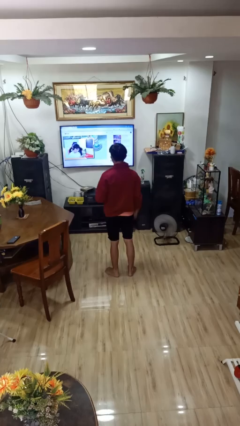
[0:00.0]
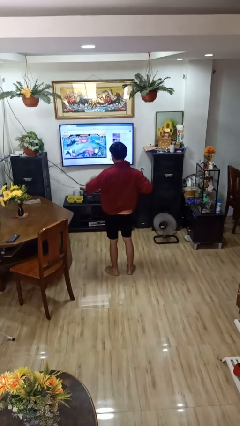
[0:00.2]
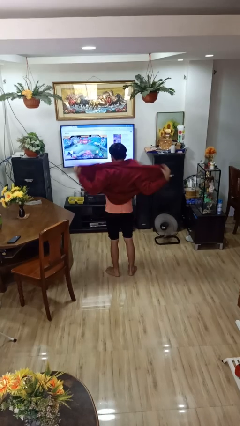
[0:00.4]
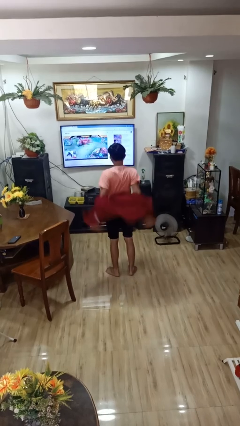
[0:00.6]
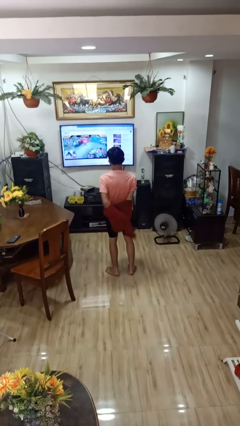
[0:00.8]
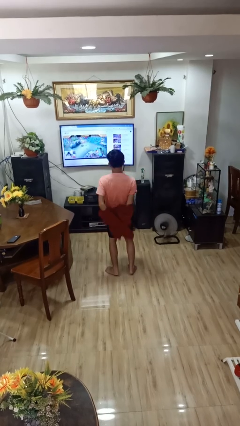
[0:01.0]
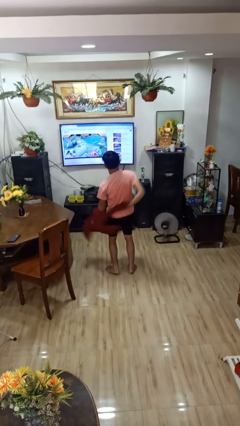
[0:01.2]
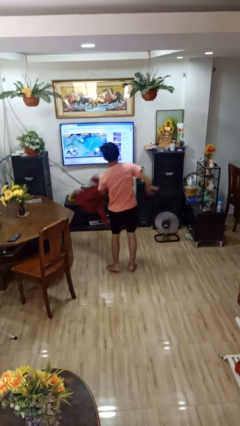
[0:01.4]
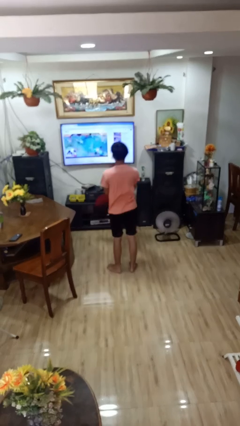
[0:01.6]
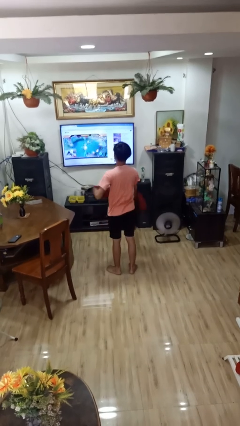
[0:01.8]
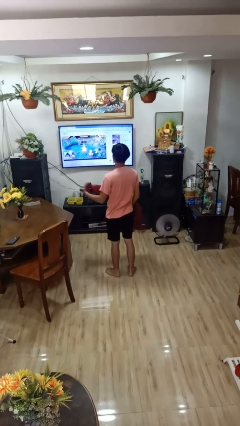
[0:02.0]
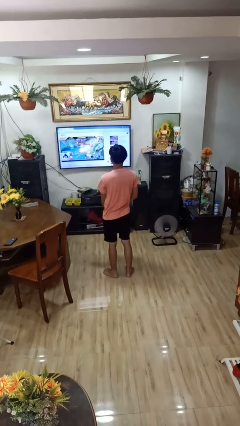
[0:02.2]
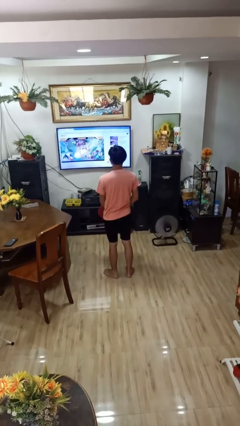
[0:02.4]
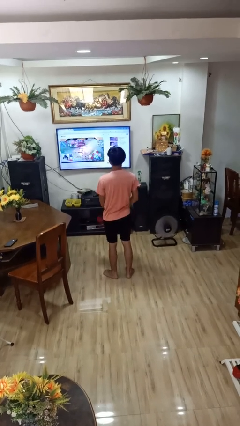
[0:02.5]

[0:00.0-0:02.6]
person takes off jacket

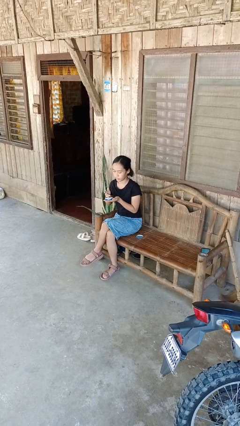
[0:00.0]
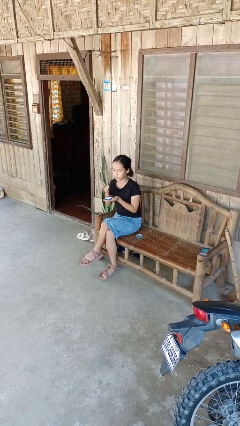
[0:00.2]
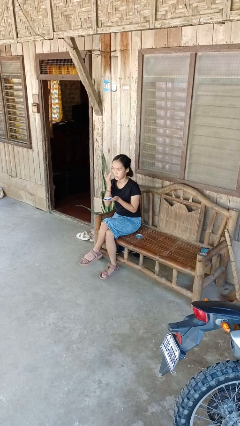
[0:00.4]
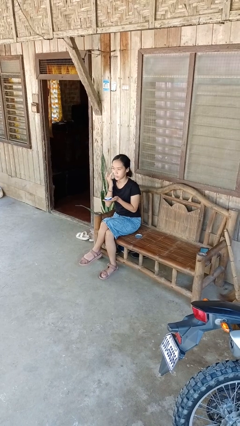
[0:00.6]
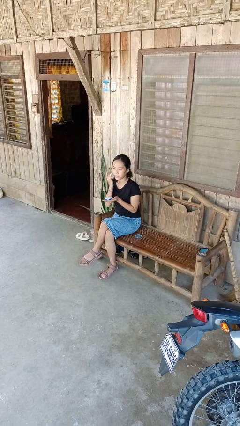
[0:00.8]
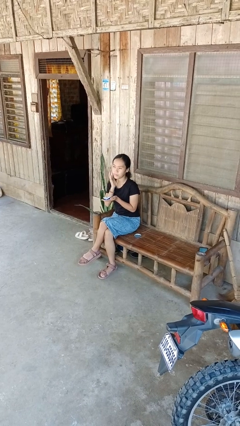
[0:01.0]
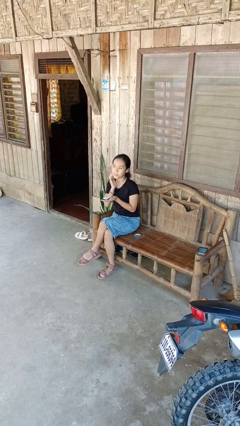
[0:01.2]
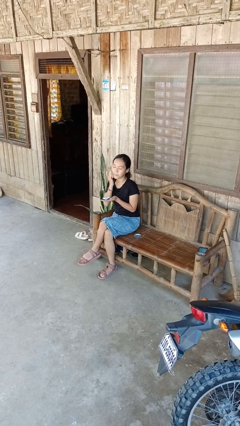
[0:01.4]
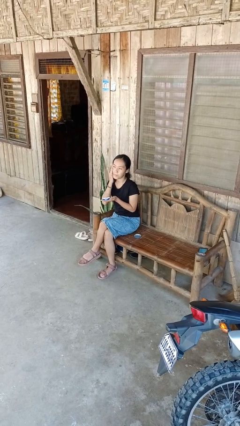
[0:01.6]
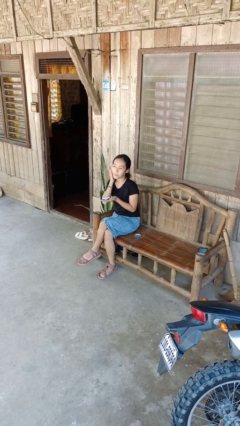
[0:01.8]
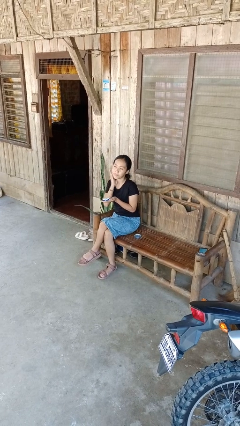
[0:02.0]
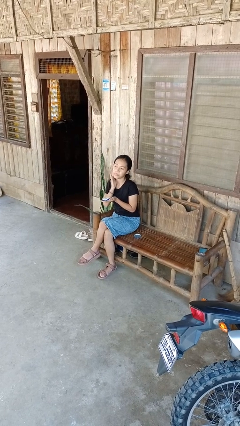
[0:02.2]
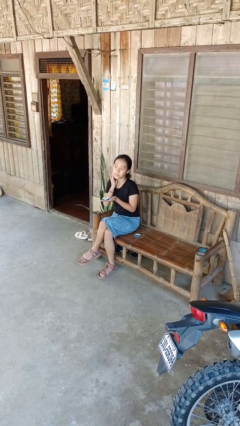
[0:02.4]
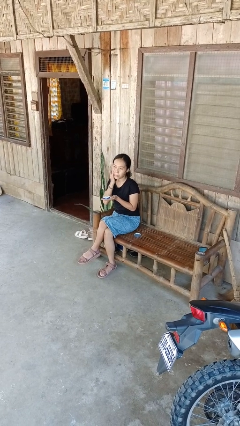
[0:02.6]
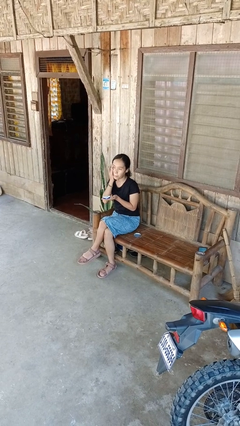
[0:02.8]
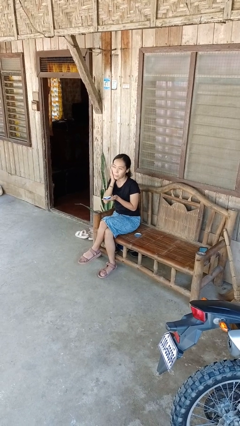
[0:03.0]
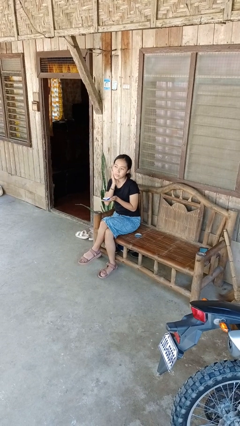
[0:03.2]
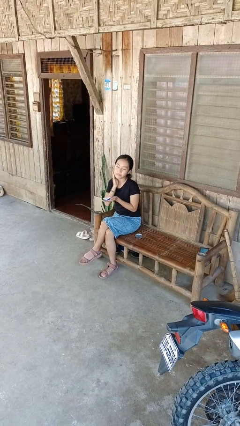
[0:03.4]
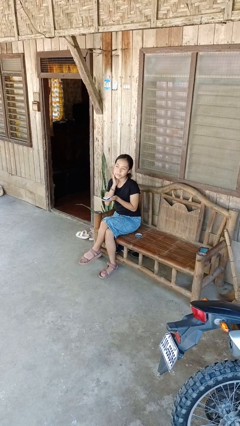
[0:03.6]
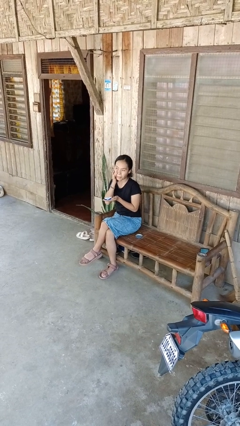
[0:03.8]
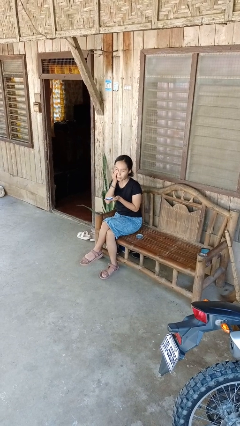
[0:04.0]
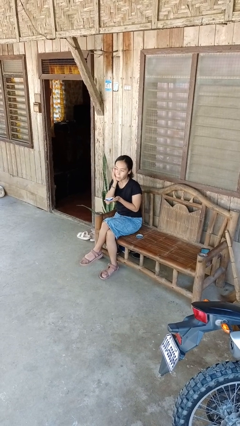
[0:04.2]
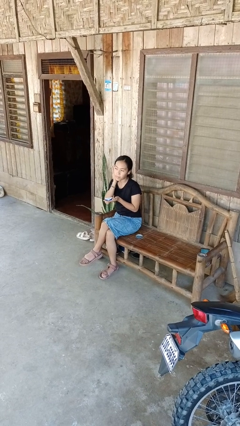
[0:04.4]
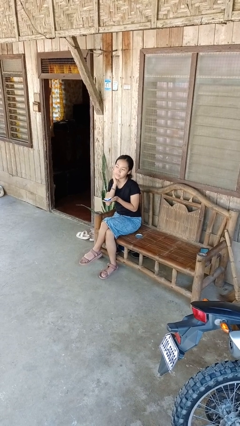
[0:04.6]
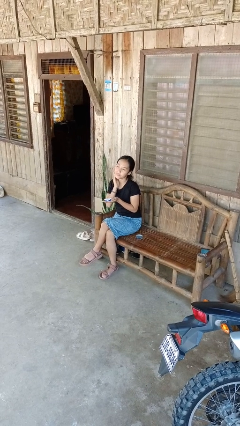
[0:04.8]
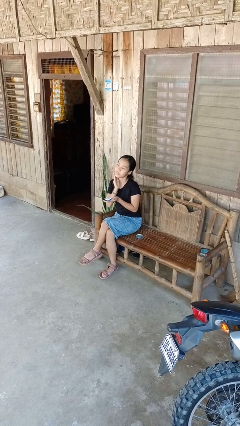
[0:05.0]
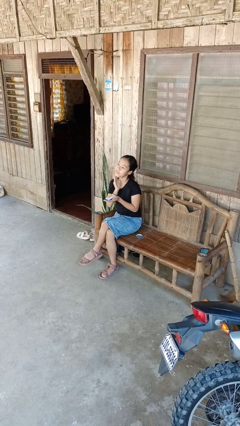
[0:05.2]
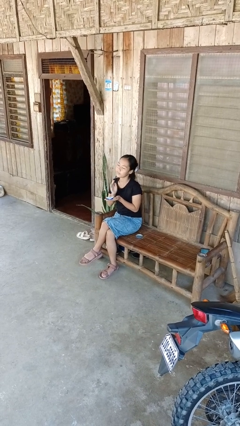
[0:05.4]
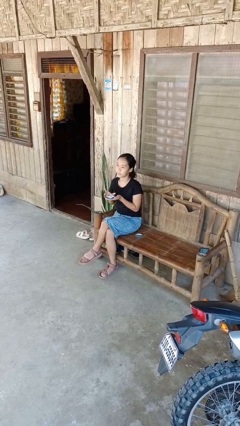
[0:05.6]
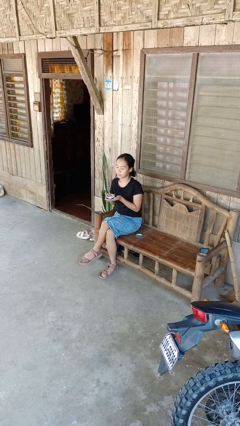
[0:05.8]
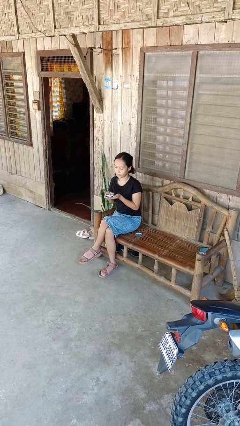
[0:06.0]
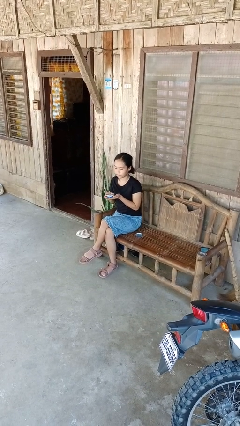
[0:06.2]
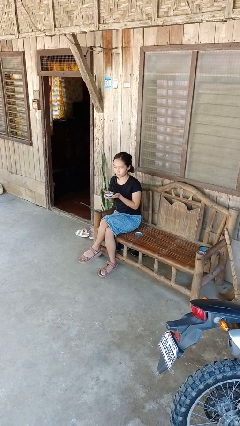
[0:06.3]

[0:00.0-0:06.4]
person applies facial moisturizer

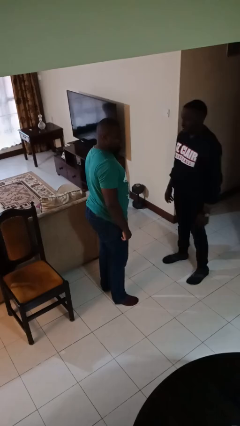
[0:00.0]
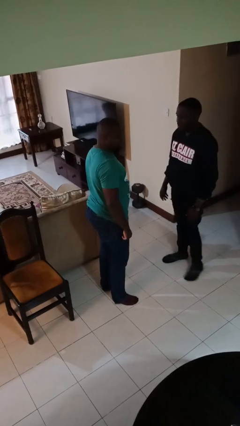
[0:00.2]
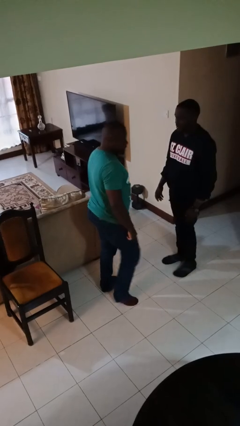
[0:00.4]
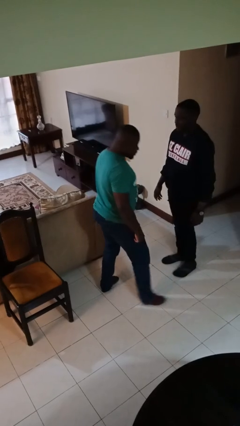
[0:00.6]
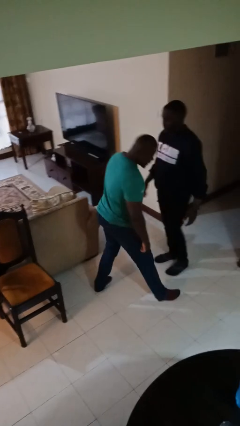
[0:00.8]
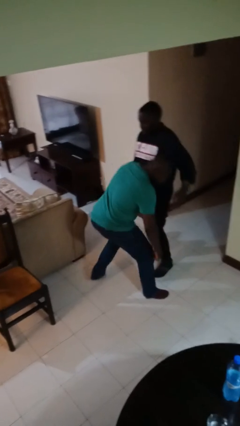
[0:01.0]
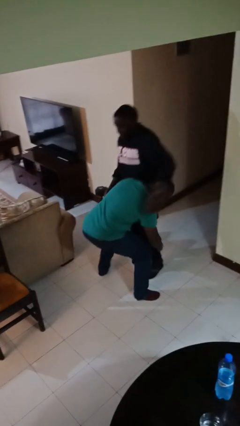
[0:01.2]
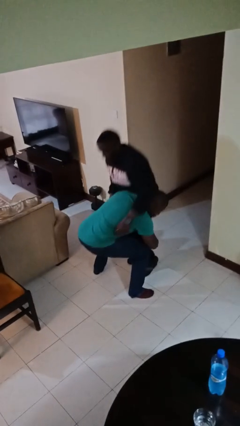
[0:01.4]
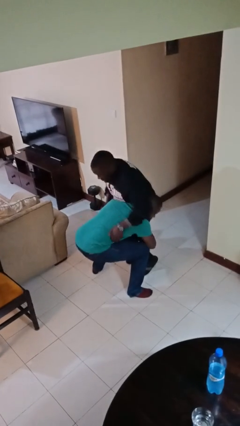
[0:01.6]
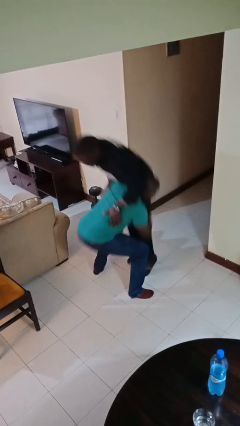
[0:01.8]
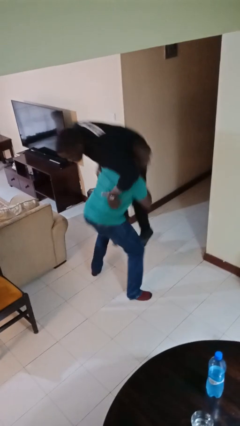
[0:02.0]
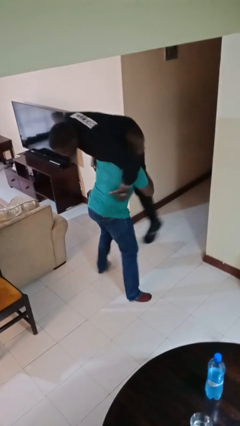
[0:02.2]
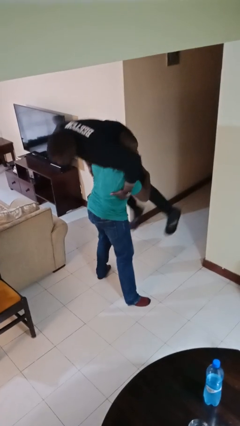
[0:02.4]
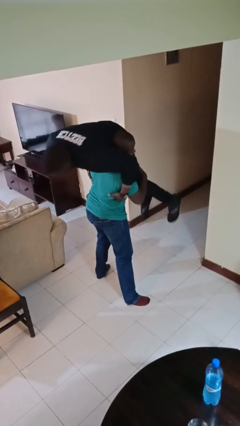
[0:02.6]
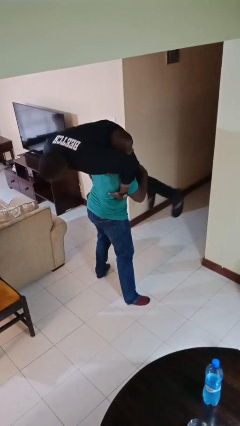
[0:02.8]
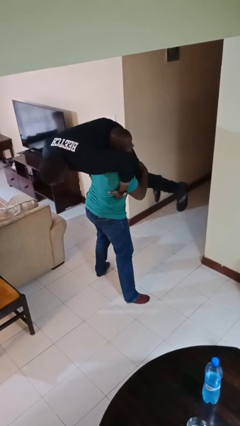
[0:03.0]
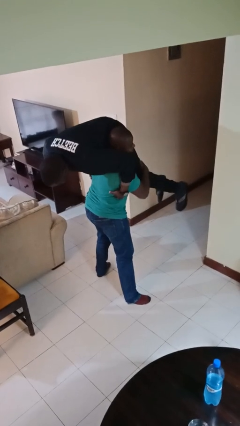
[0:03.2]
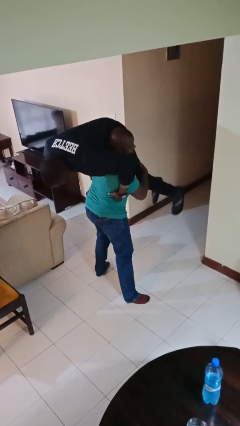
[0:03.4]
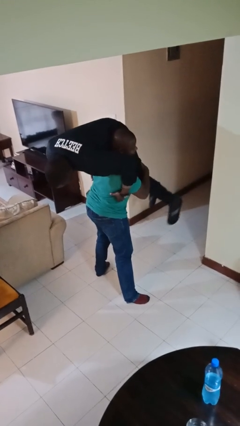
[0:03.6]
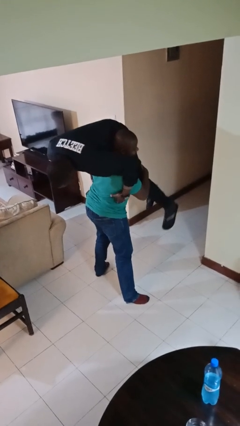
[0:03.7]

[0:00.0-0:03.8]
person carries person over shoulder

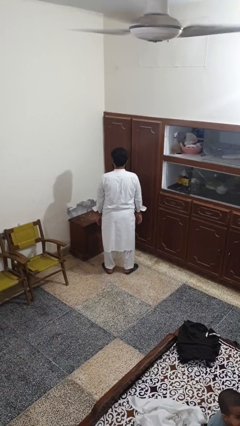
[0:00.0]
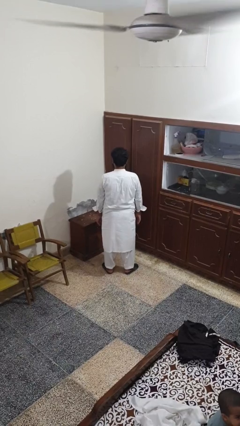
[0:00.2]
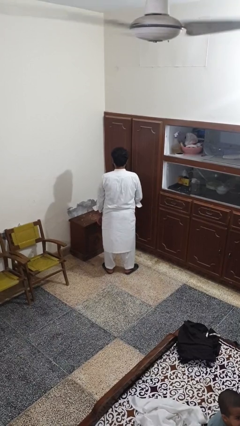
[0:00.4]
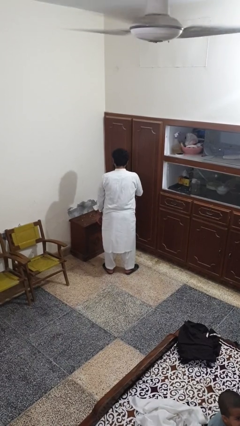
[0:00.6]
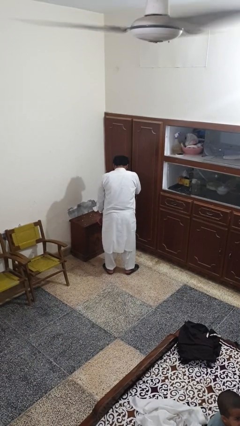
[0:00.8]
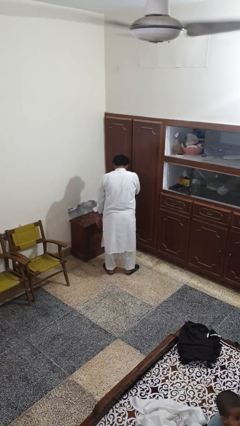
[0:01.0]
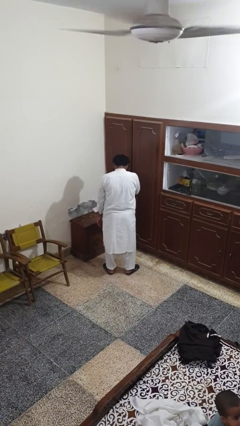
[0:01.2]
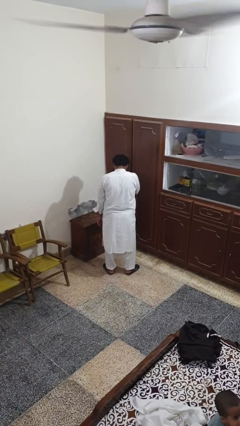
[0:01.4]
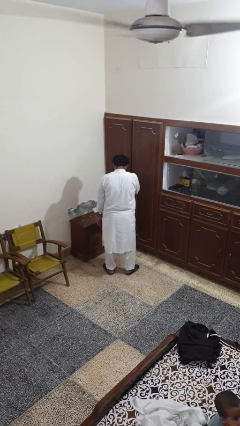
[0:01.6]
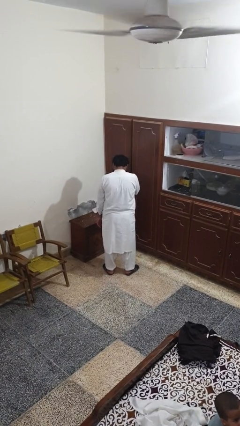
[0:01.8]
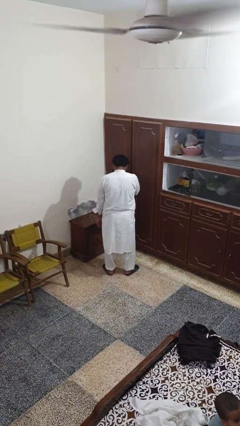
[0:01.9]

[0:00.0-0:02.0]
person sneezes into hand

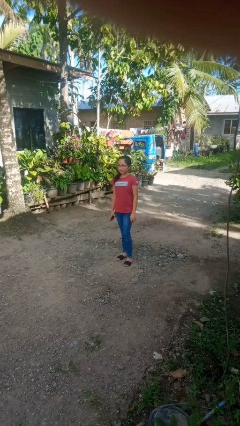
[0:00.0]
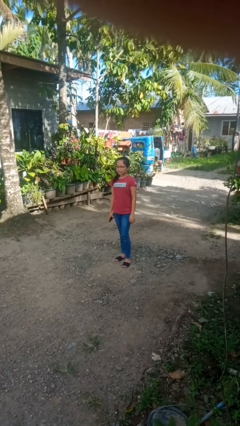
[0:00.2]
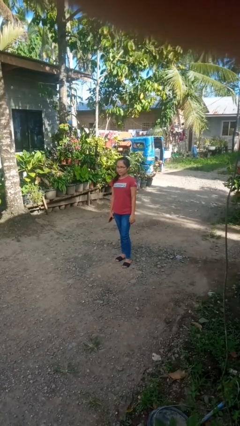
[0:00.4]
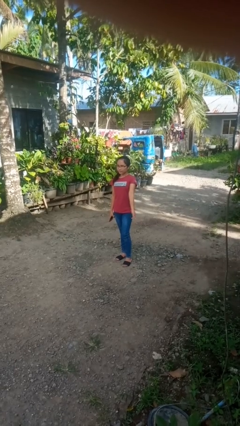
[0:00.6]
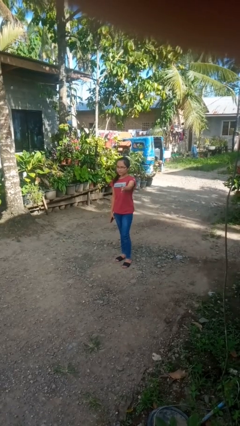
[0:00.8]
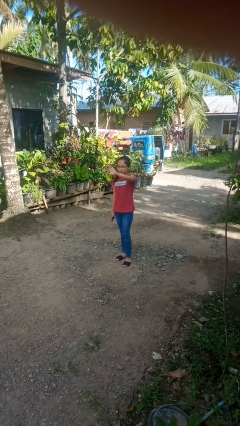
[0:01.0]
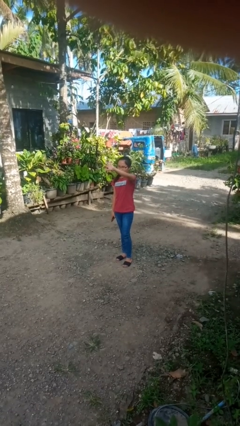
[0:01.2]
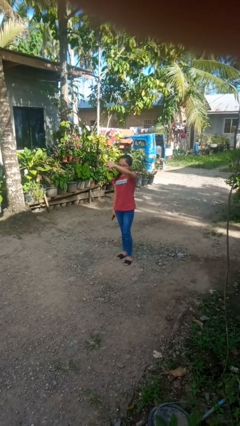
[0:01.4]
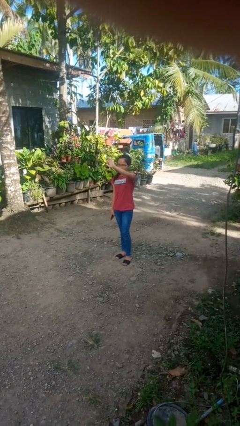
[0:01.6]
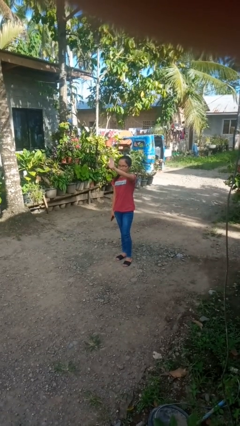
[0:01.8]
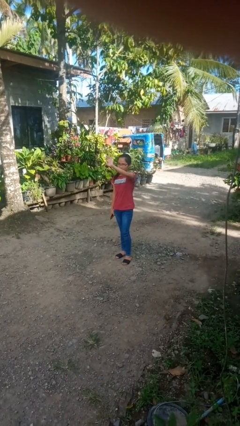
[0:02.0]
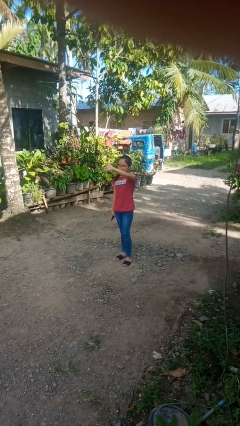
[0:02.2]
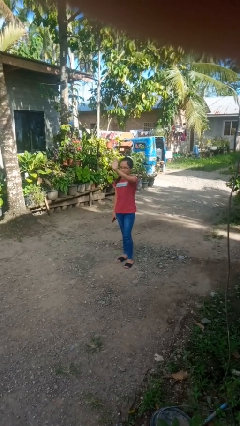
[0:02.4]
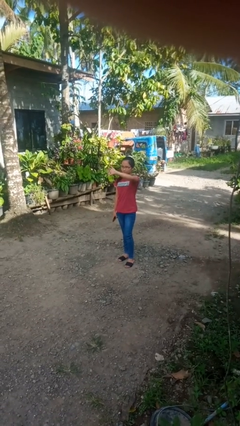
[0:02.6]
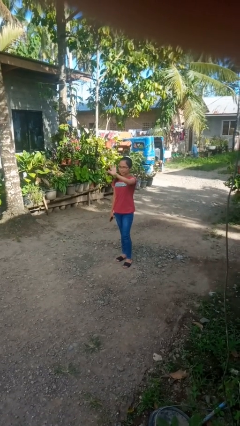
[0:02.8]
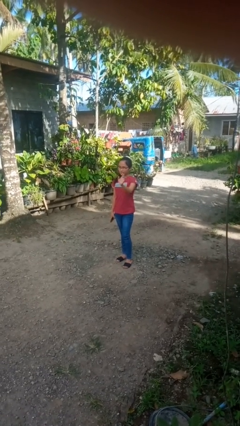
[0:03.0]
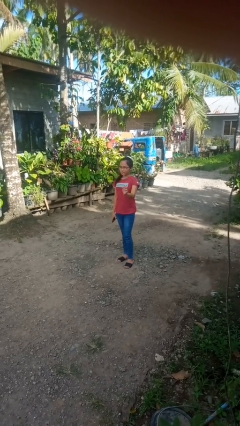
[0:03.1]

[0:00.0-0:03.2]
person waves at person
